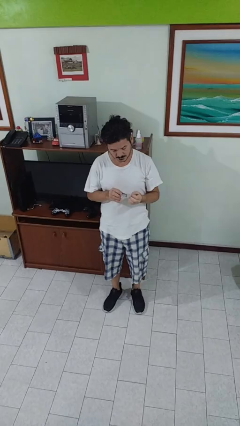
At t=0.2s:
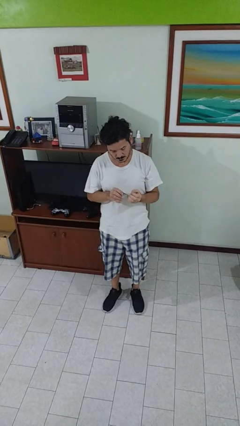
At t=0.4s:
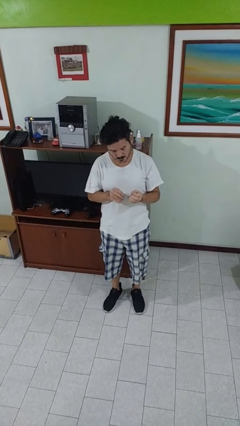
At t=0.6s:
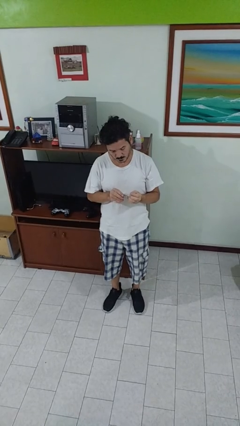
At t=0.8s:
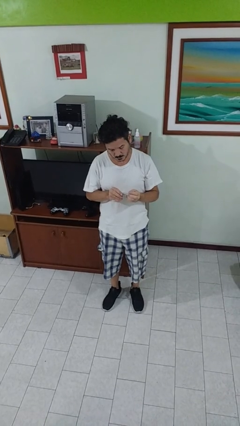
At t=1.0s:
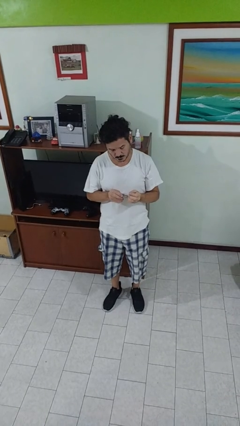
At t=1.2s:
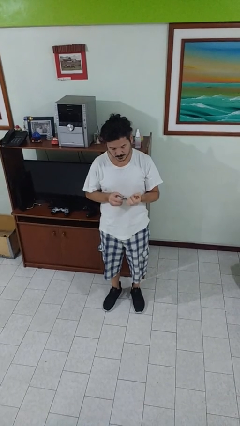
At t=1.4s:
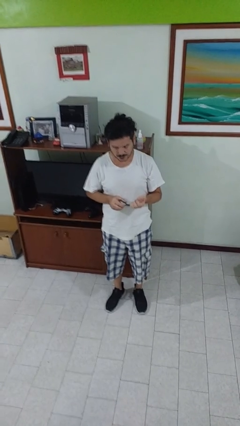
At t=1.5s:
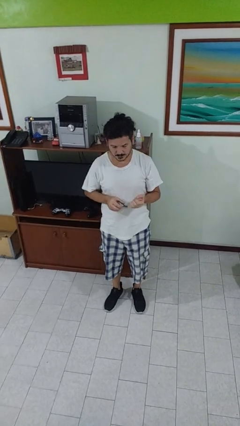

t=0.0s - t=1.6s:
person clips fingernails

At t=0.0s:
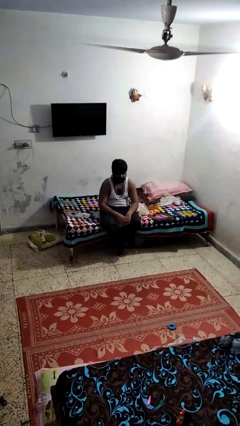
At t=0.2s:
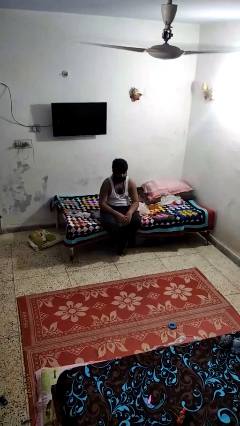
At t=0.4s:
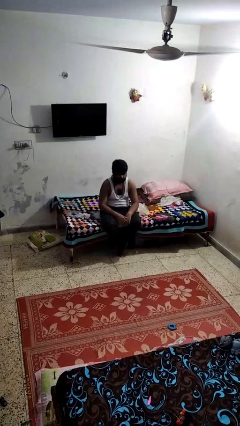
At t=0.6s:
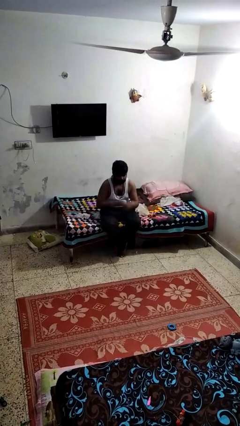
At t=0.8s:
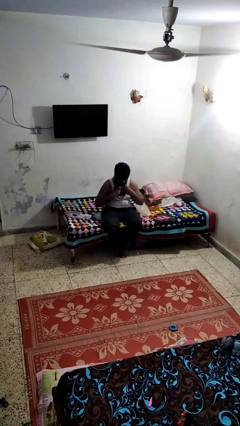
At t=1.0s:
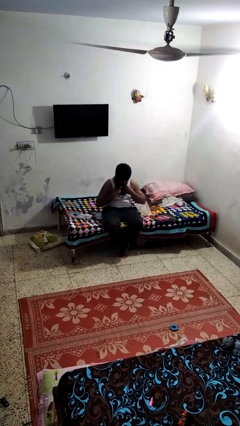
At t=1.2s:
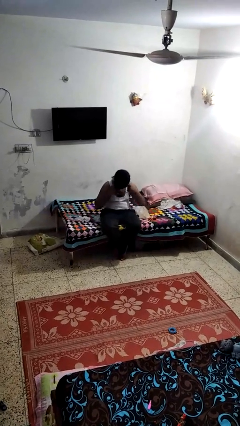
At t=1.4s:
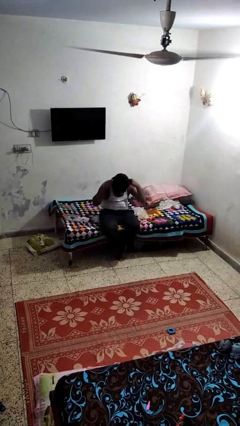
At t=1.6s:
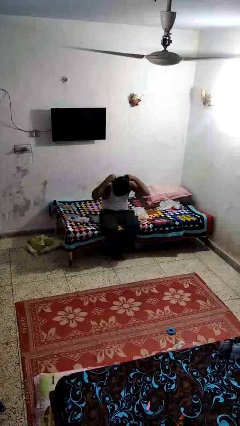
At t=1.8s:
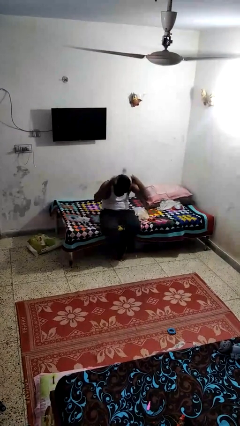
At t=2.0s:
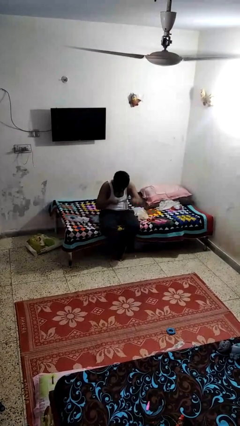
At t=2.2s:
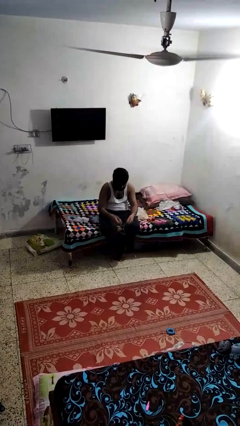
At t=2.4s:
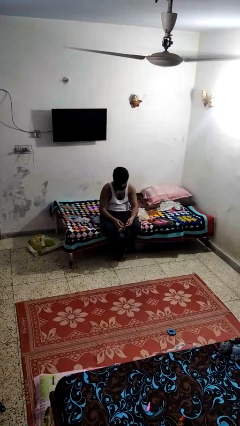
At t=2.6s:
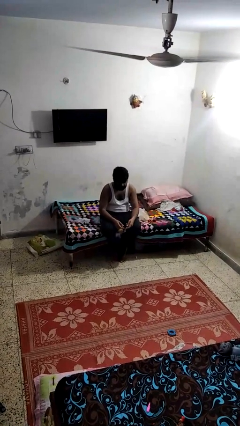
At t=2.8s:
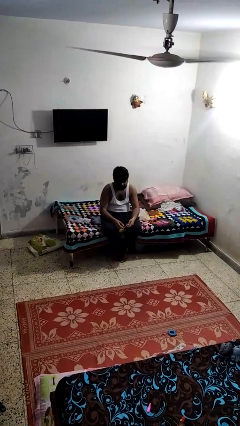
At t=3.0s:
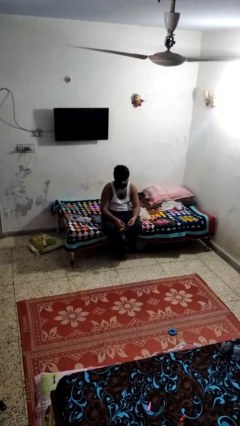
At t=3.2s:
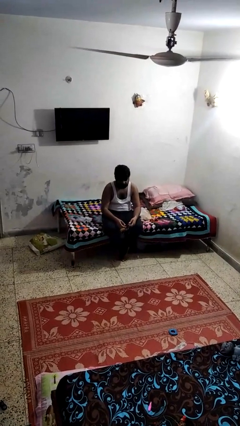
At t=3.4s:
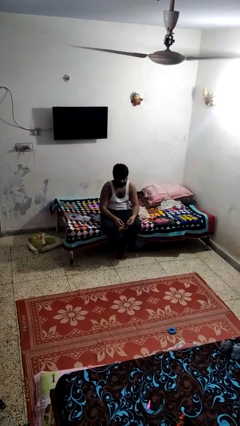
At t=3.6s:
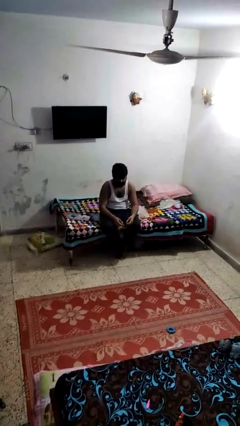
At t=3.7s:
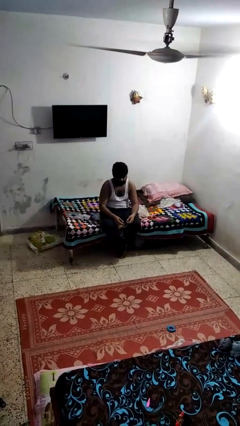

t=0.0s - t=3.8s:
person takes off necklace

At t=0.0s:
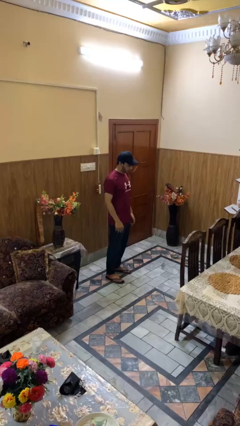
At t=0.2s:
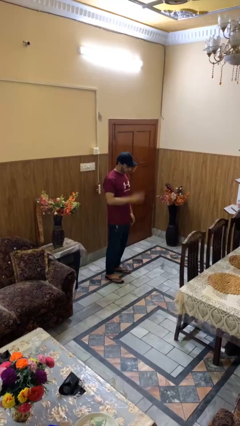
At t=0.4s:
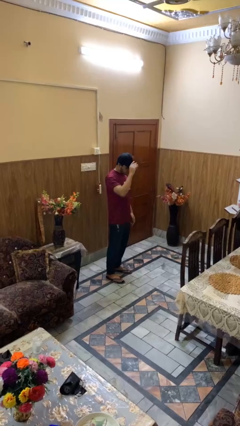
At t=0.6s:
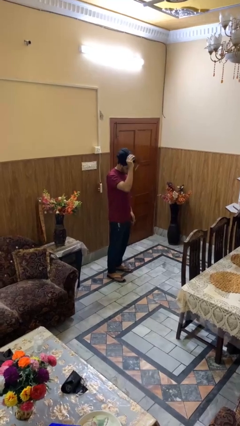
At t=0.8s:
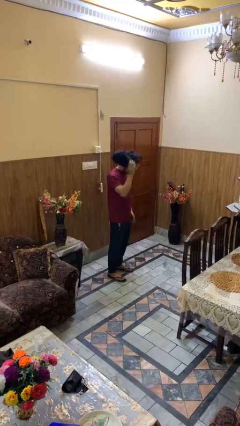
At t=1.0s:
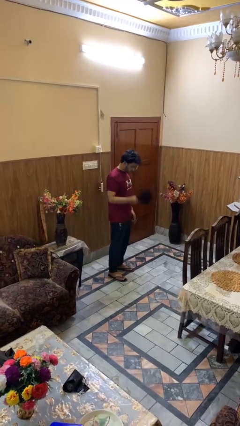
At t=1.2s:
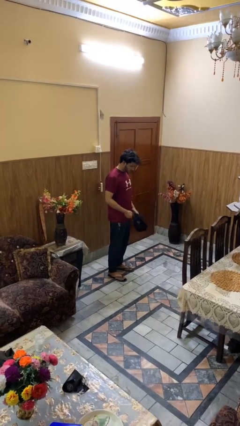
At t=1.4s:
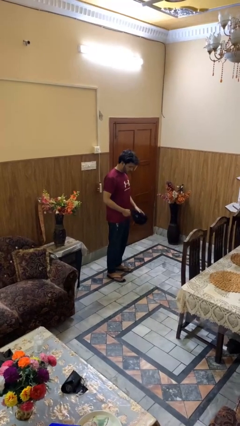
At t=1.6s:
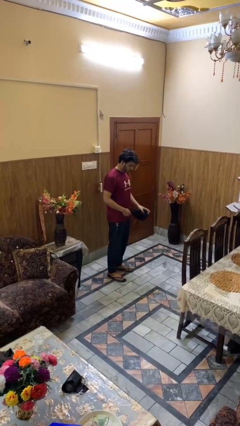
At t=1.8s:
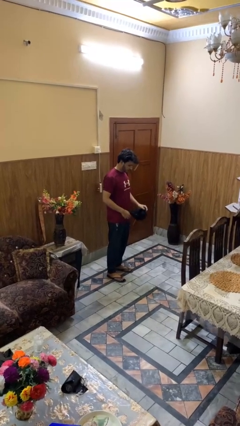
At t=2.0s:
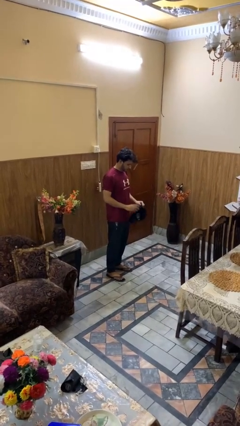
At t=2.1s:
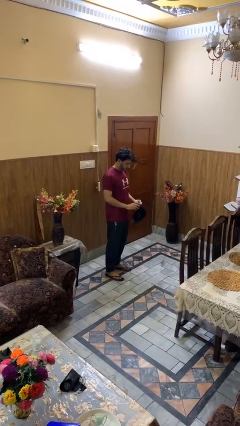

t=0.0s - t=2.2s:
person takes off hat

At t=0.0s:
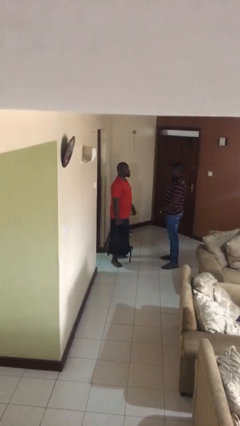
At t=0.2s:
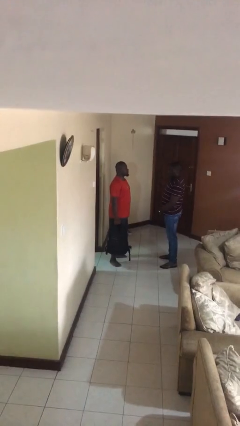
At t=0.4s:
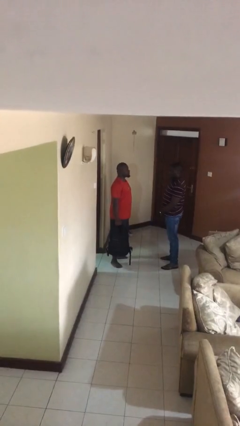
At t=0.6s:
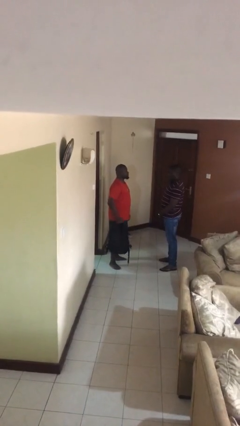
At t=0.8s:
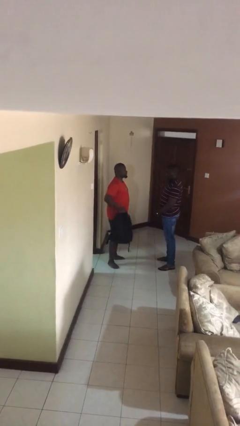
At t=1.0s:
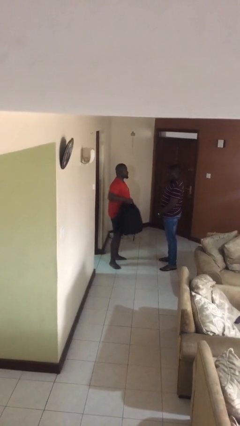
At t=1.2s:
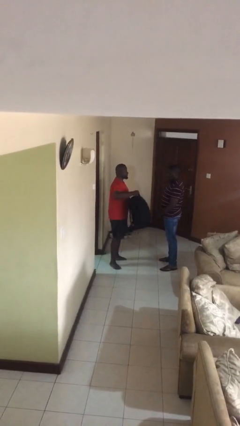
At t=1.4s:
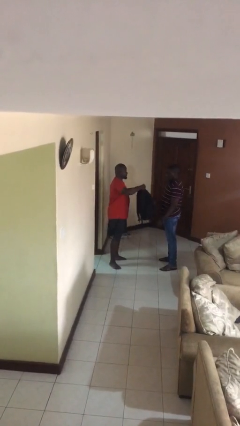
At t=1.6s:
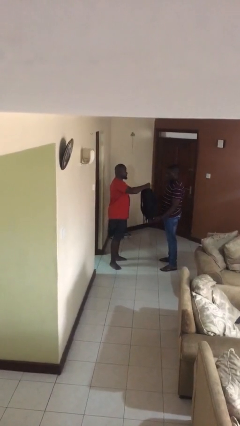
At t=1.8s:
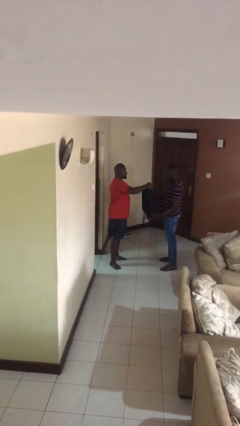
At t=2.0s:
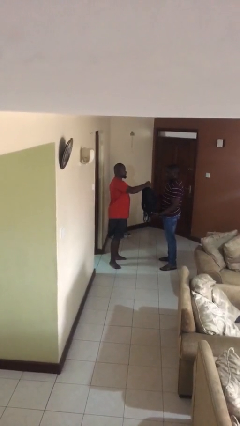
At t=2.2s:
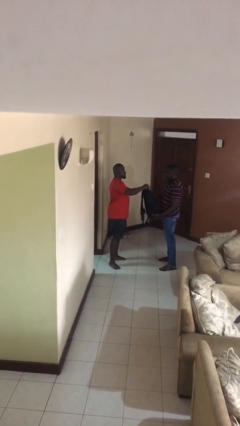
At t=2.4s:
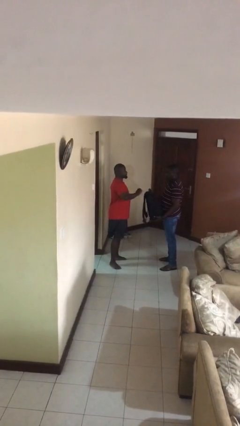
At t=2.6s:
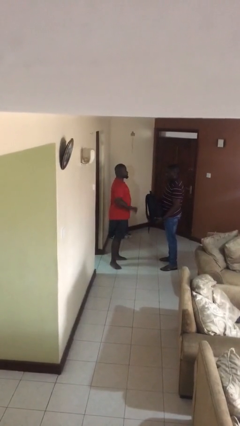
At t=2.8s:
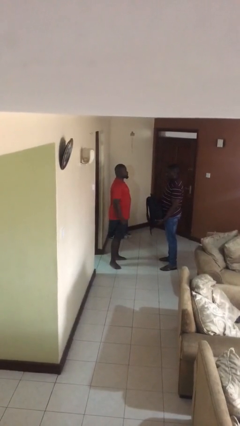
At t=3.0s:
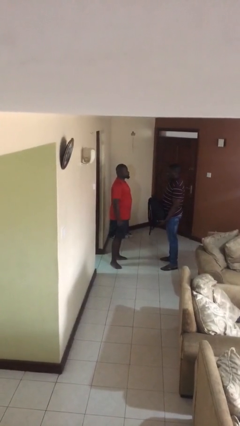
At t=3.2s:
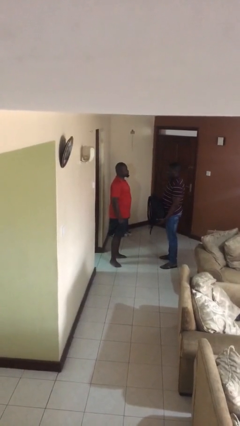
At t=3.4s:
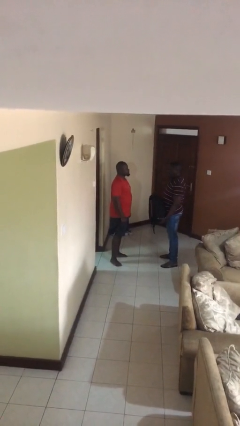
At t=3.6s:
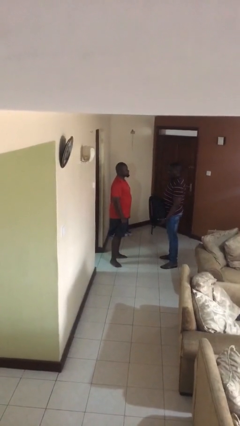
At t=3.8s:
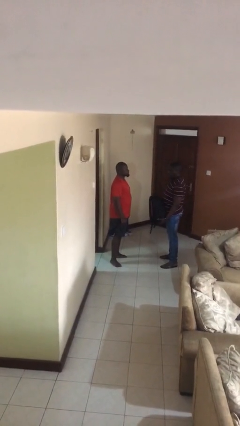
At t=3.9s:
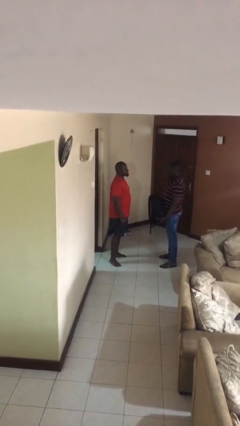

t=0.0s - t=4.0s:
person transfers object to person

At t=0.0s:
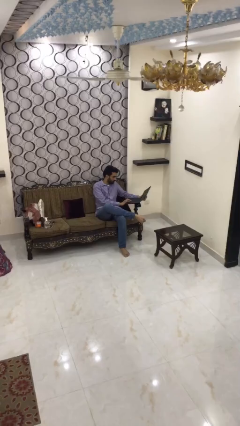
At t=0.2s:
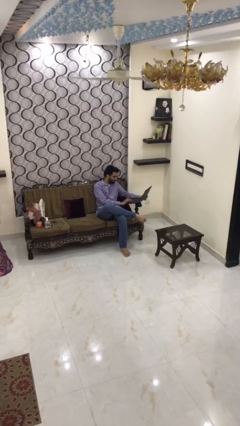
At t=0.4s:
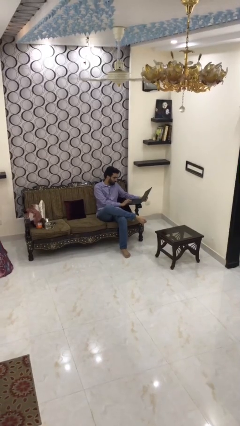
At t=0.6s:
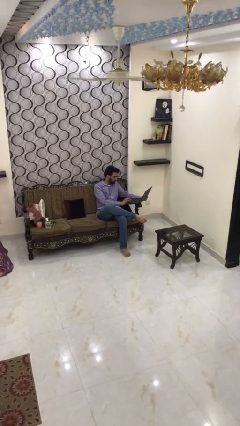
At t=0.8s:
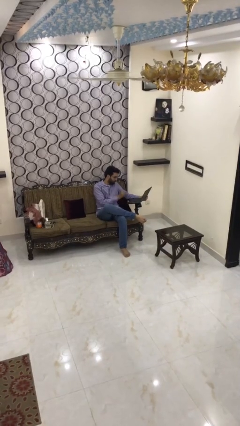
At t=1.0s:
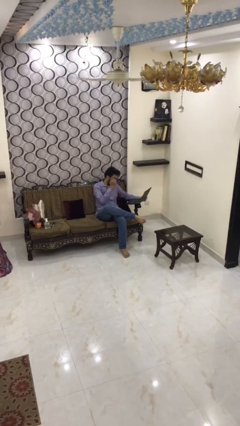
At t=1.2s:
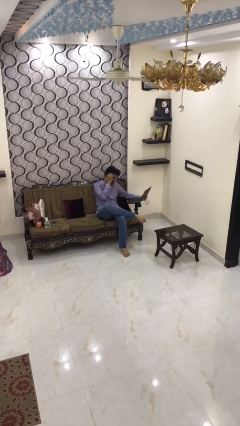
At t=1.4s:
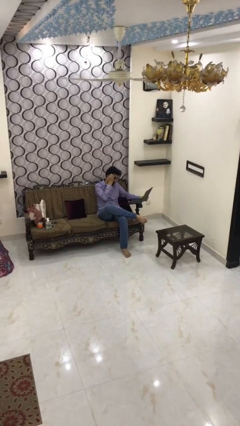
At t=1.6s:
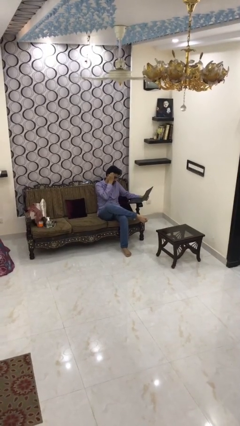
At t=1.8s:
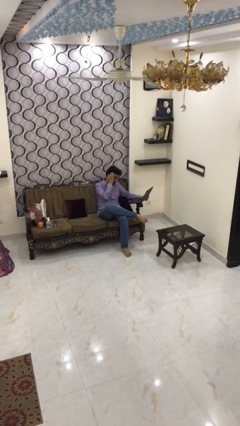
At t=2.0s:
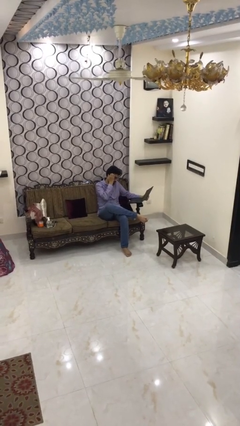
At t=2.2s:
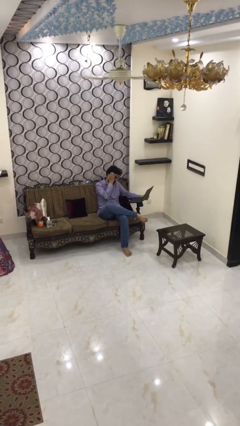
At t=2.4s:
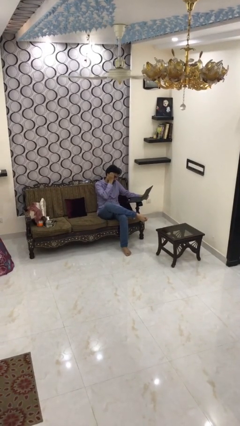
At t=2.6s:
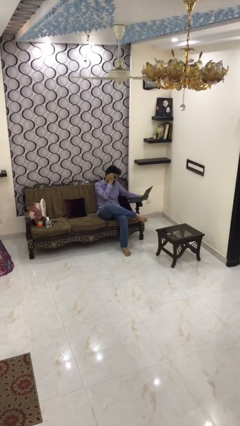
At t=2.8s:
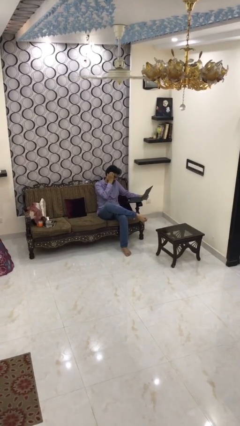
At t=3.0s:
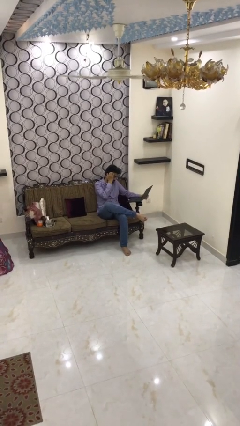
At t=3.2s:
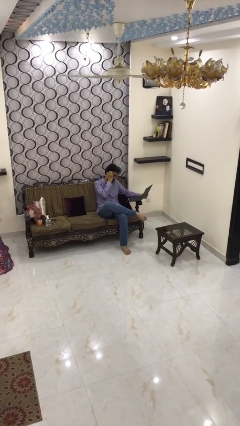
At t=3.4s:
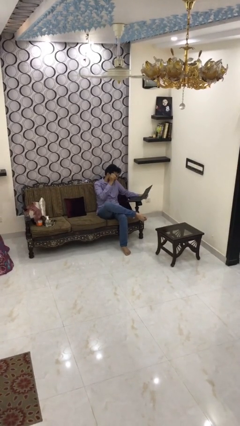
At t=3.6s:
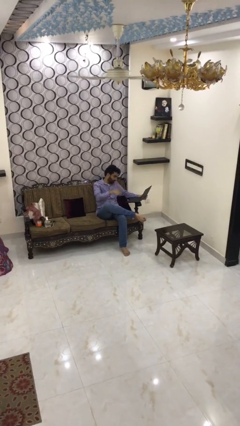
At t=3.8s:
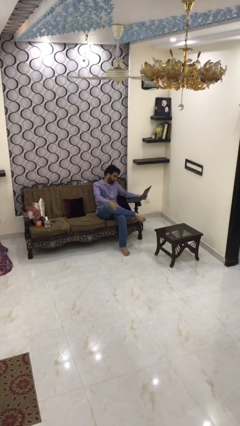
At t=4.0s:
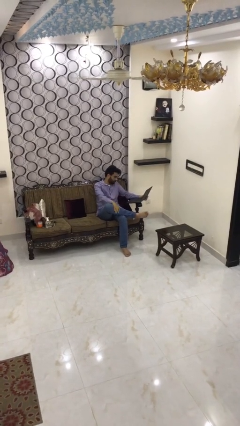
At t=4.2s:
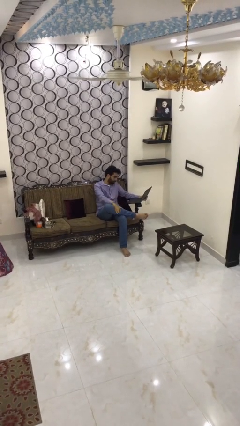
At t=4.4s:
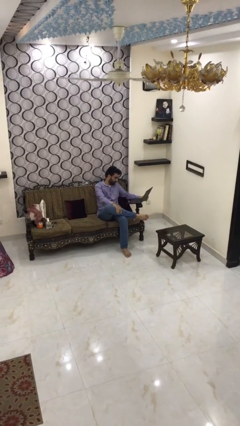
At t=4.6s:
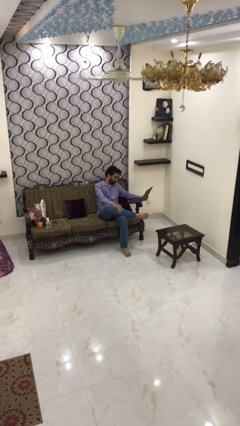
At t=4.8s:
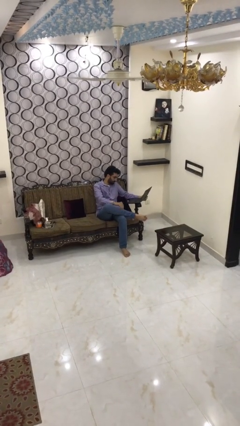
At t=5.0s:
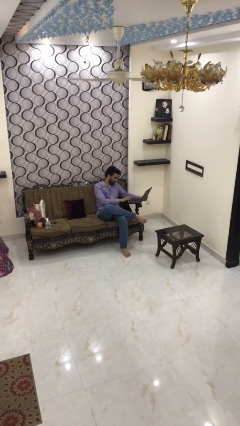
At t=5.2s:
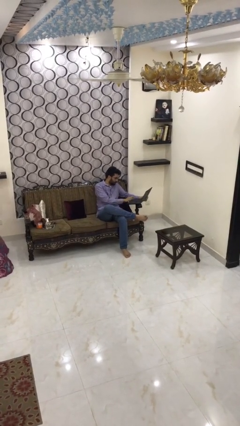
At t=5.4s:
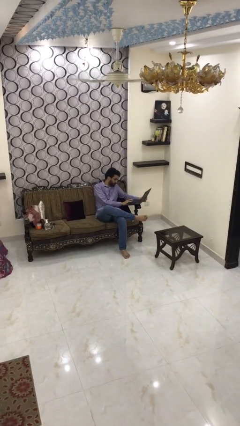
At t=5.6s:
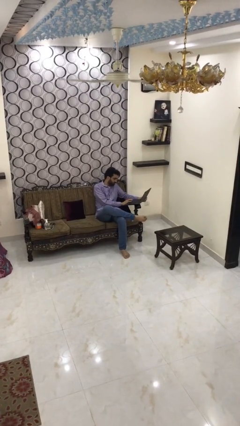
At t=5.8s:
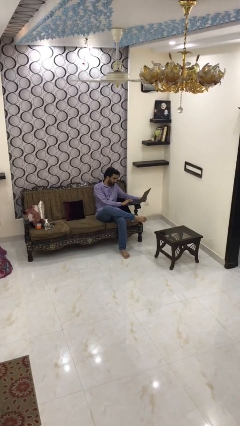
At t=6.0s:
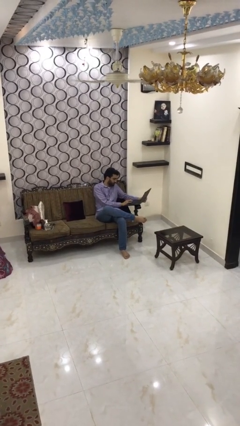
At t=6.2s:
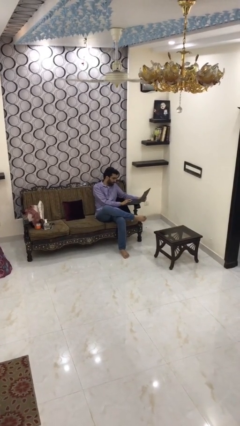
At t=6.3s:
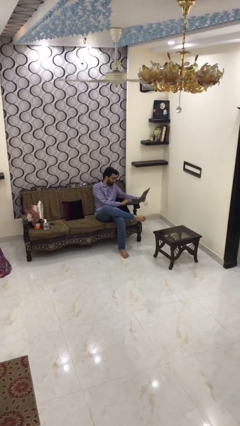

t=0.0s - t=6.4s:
person interacts with laptop
